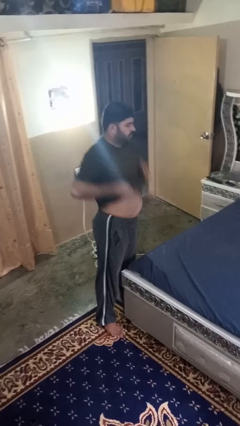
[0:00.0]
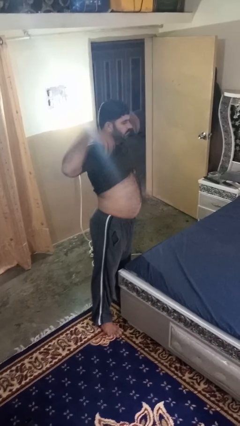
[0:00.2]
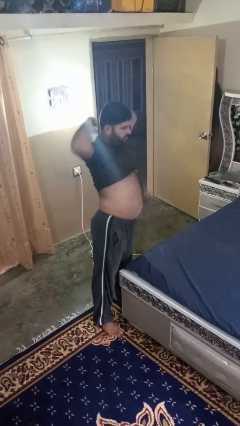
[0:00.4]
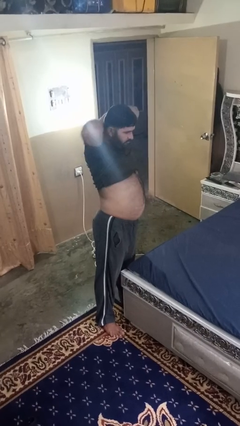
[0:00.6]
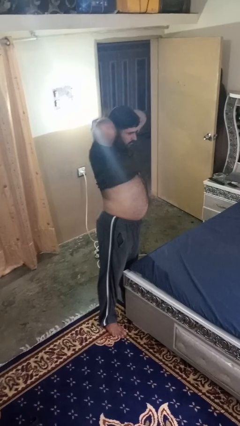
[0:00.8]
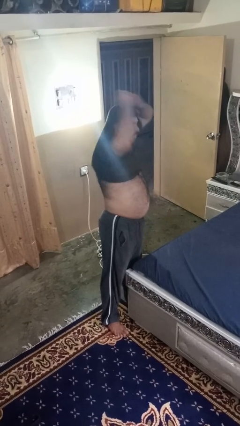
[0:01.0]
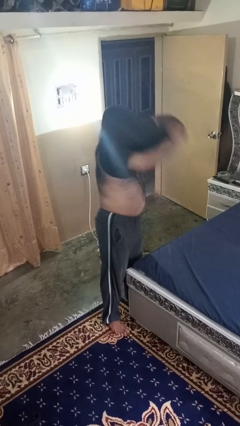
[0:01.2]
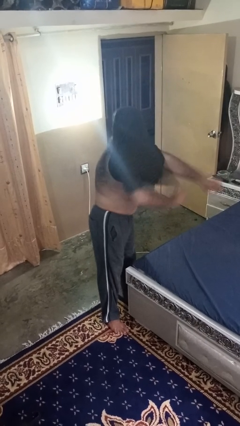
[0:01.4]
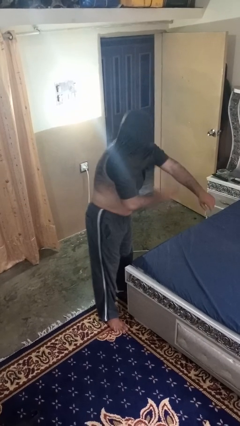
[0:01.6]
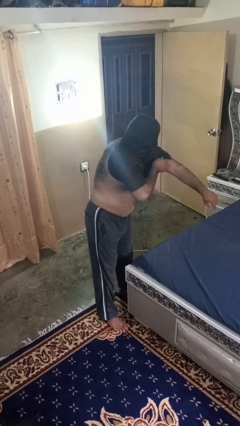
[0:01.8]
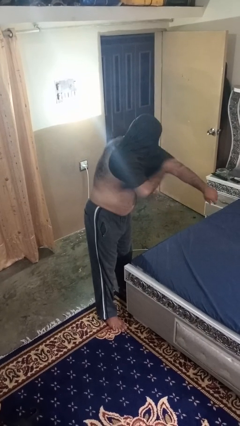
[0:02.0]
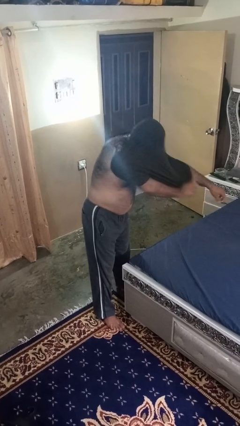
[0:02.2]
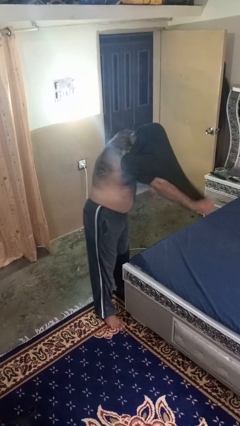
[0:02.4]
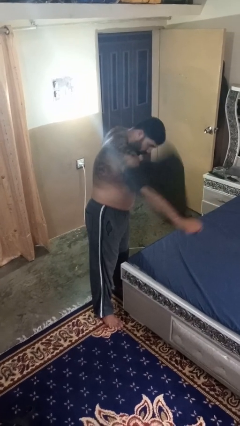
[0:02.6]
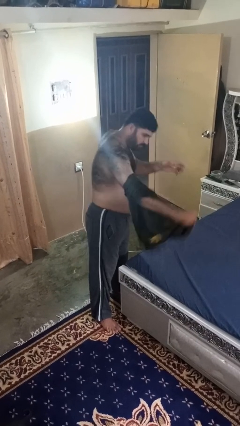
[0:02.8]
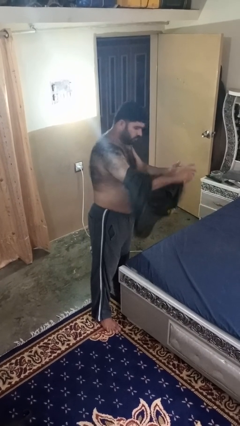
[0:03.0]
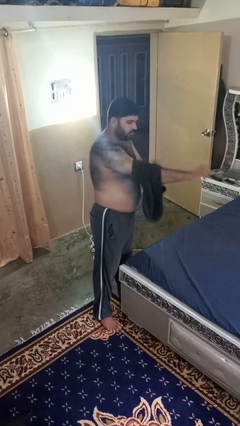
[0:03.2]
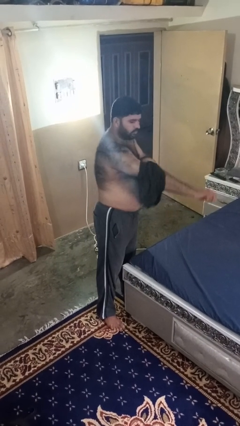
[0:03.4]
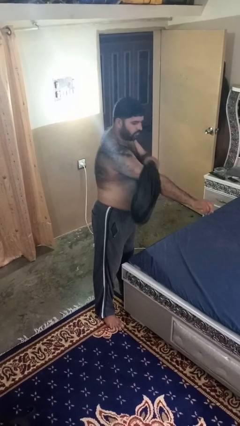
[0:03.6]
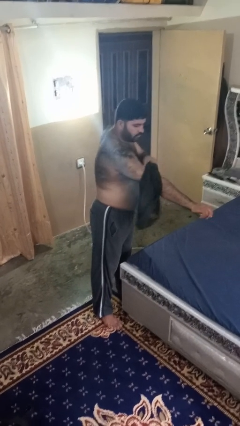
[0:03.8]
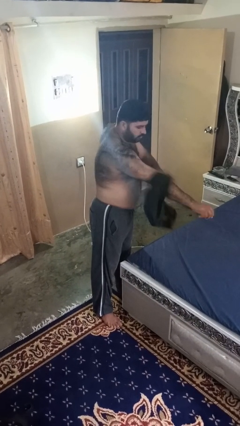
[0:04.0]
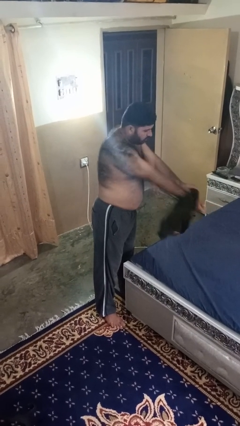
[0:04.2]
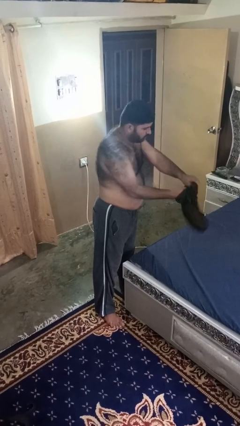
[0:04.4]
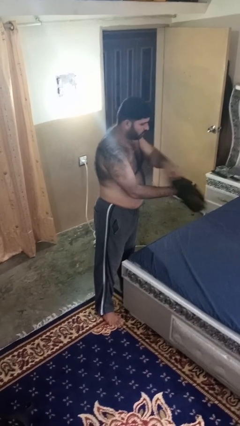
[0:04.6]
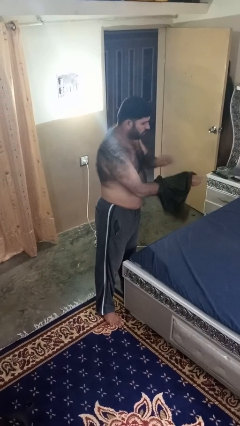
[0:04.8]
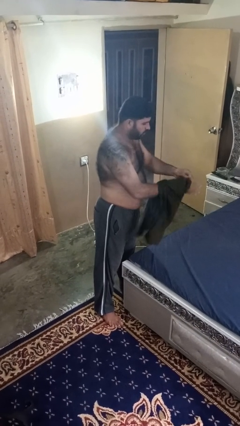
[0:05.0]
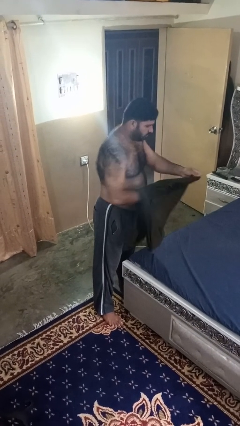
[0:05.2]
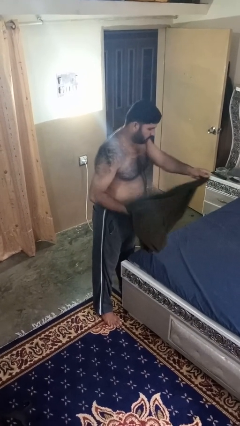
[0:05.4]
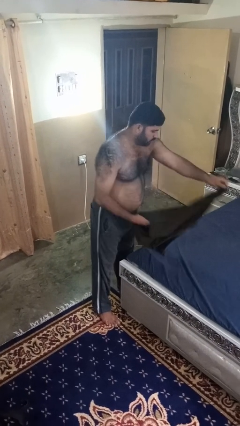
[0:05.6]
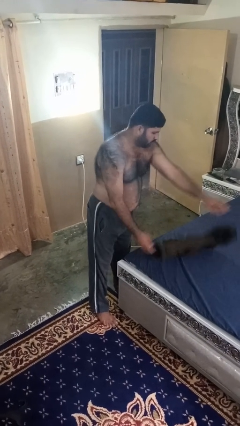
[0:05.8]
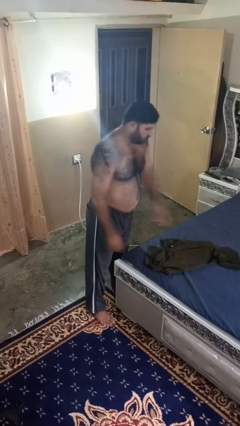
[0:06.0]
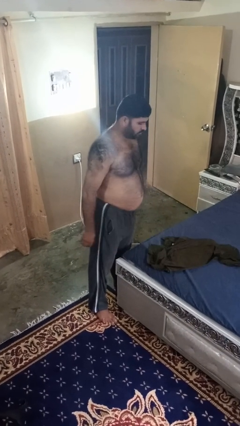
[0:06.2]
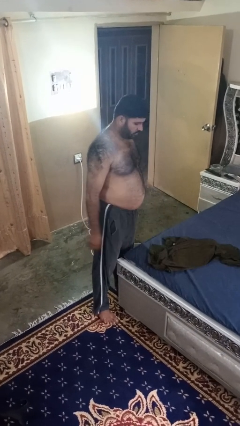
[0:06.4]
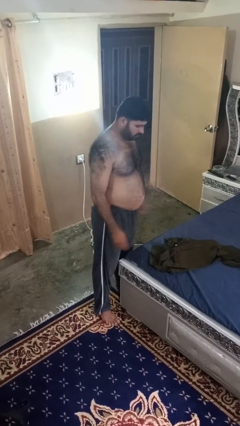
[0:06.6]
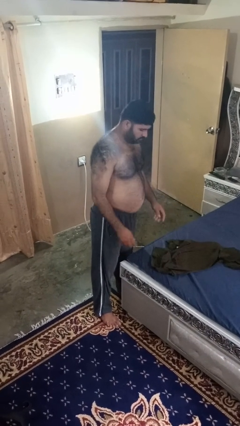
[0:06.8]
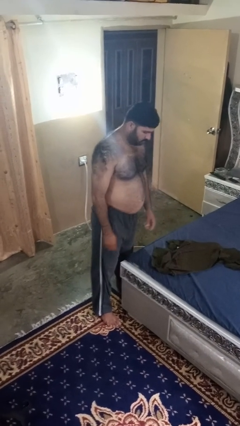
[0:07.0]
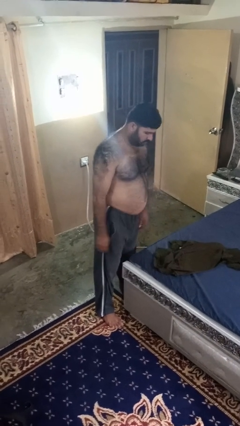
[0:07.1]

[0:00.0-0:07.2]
person takes off shirt

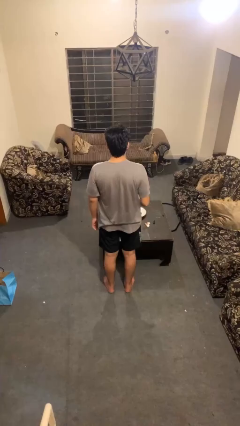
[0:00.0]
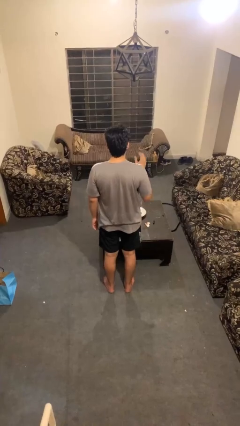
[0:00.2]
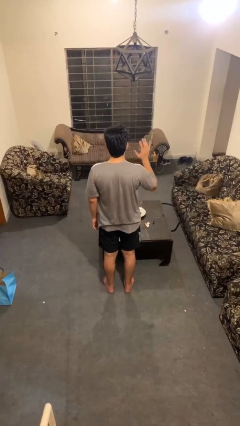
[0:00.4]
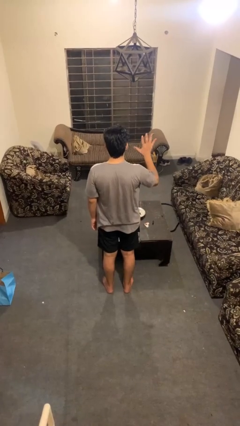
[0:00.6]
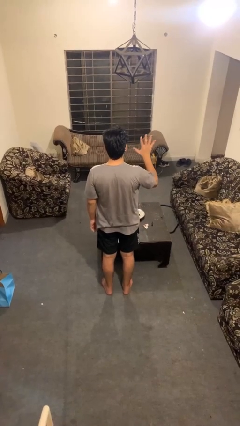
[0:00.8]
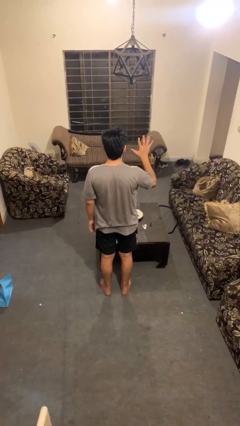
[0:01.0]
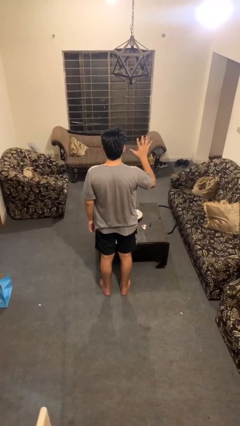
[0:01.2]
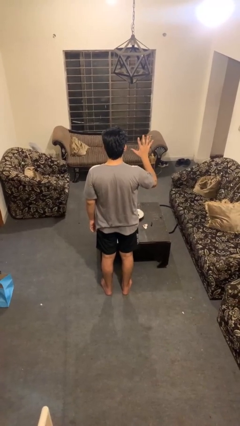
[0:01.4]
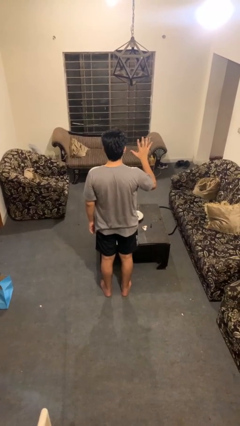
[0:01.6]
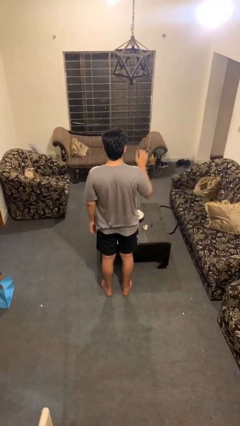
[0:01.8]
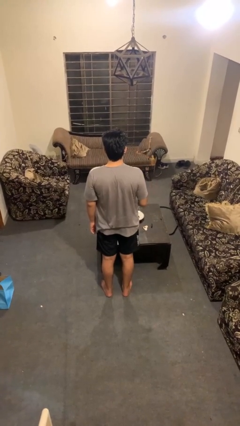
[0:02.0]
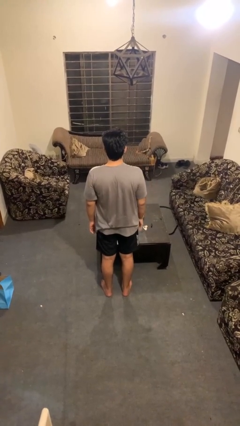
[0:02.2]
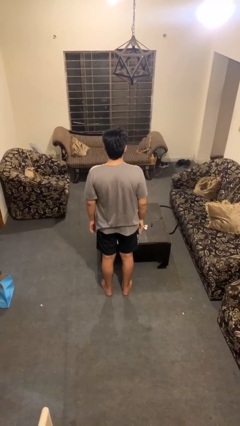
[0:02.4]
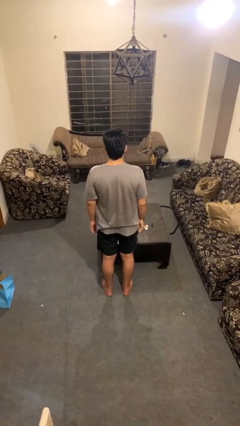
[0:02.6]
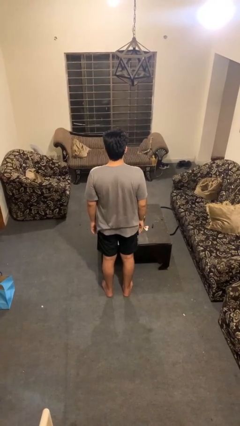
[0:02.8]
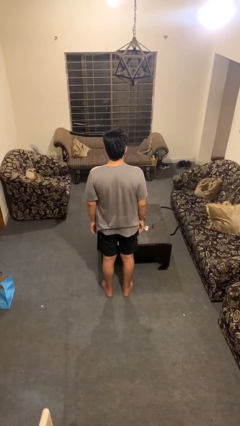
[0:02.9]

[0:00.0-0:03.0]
person gestures number five

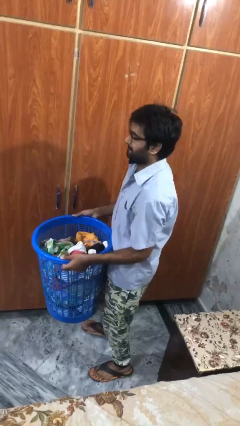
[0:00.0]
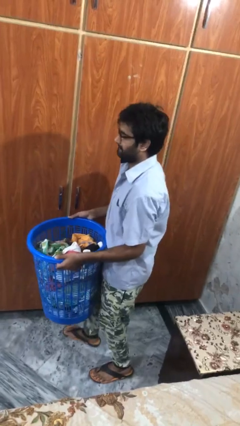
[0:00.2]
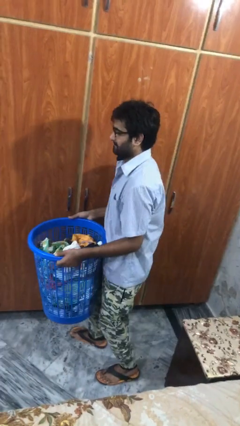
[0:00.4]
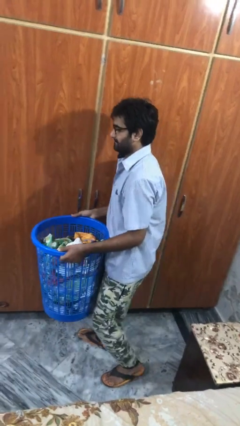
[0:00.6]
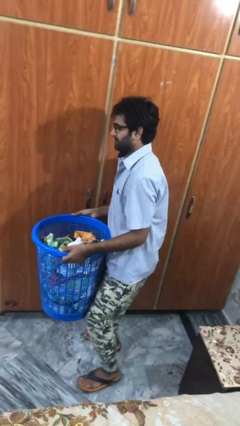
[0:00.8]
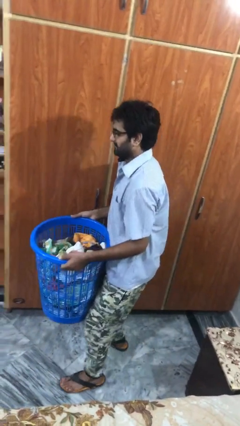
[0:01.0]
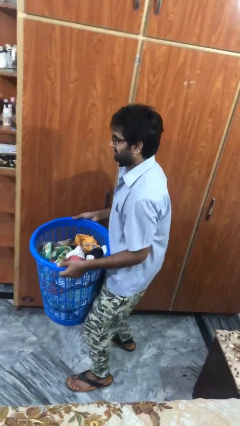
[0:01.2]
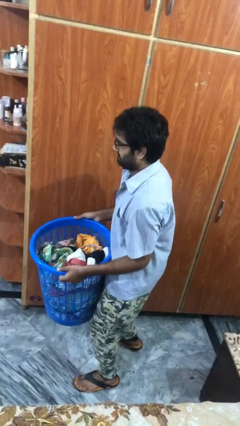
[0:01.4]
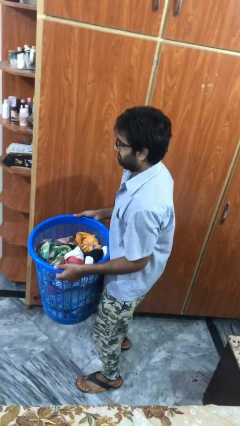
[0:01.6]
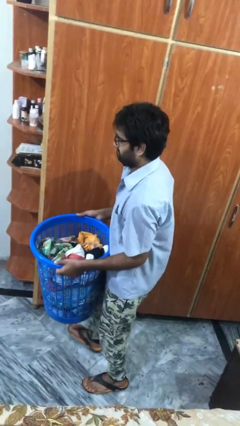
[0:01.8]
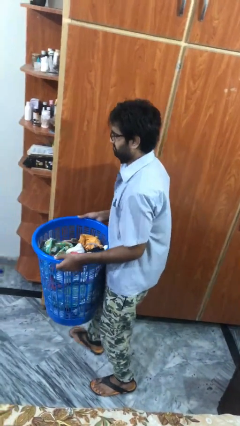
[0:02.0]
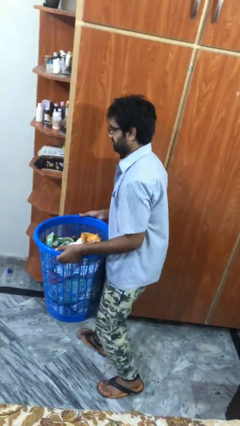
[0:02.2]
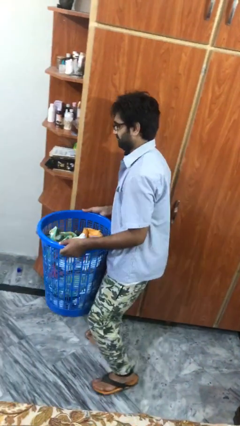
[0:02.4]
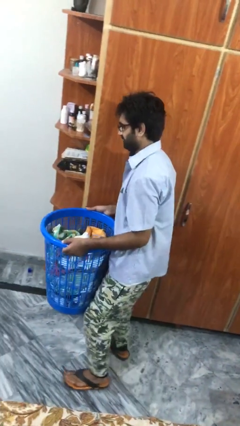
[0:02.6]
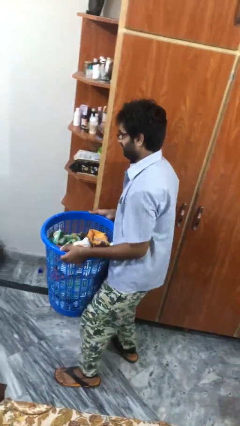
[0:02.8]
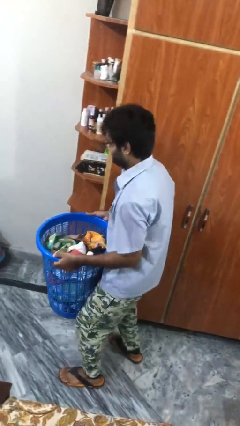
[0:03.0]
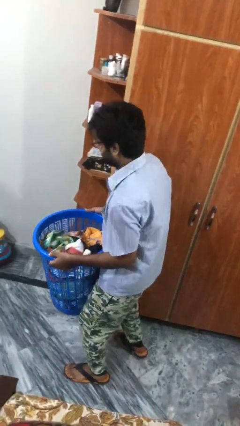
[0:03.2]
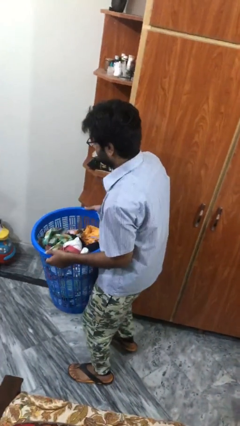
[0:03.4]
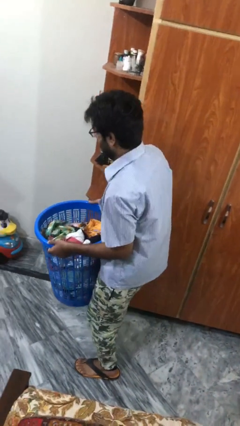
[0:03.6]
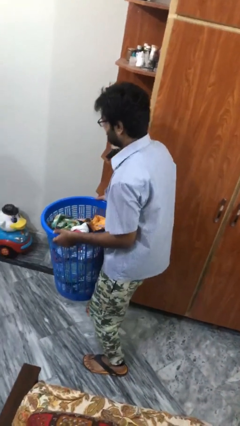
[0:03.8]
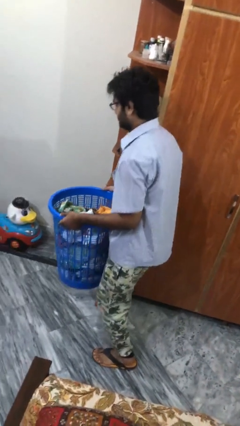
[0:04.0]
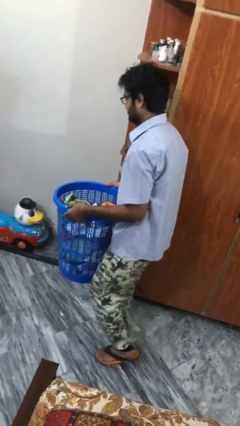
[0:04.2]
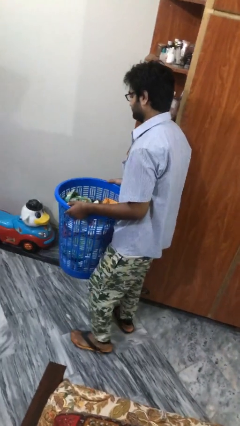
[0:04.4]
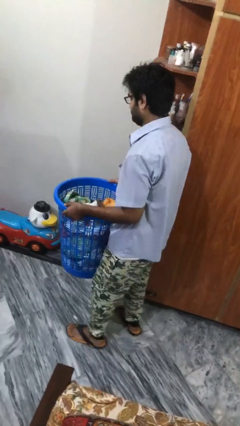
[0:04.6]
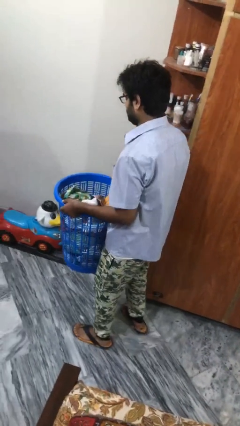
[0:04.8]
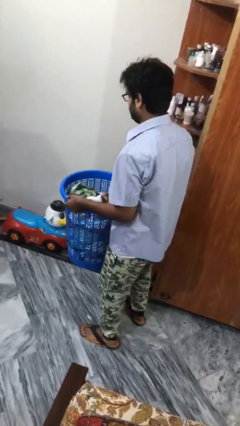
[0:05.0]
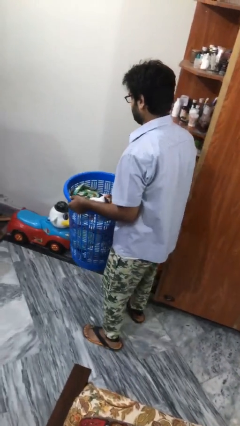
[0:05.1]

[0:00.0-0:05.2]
person carries heavy object

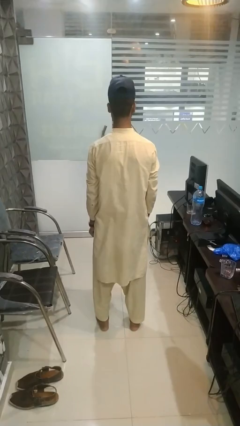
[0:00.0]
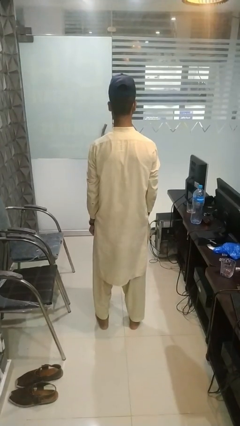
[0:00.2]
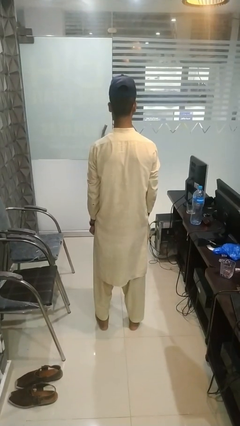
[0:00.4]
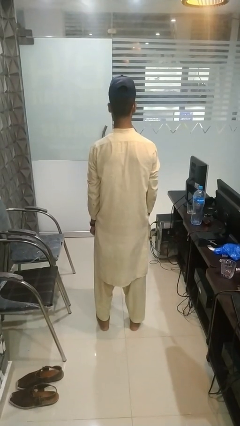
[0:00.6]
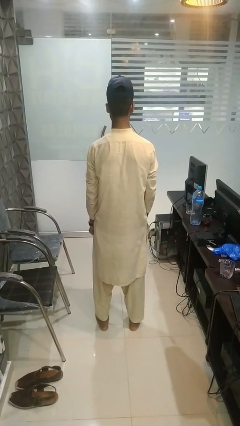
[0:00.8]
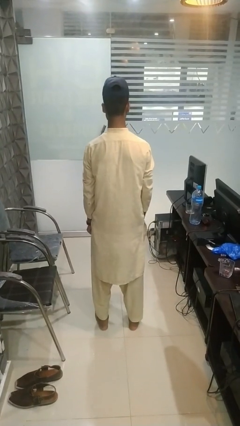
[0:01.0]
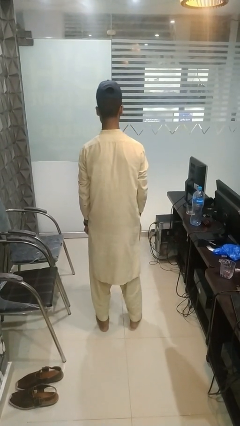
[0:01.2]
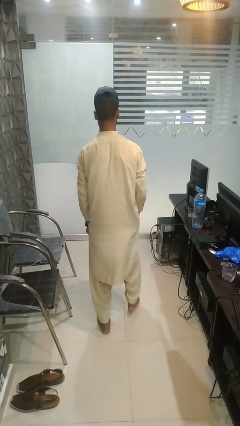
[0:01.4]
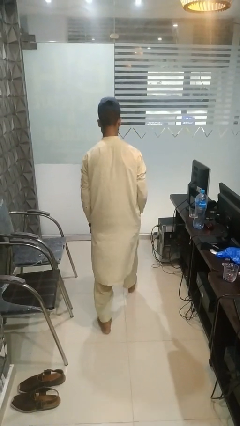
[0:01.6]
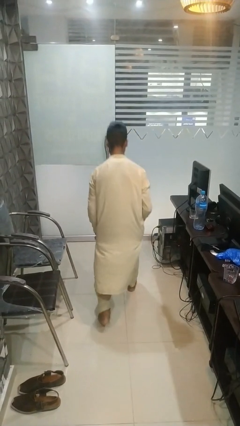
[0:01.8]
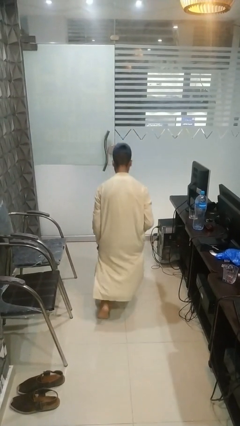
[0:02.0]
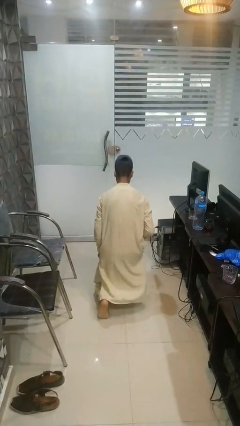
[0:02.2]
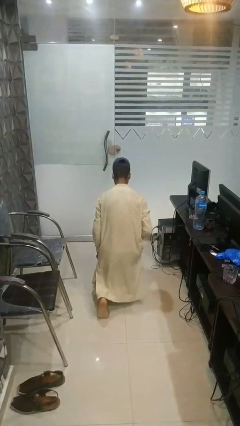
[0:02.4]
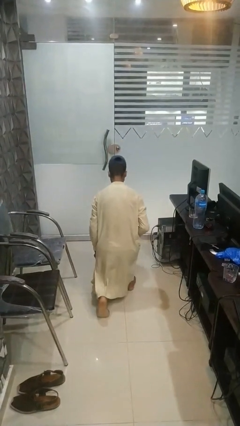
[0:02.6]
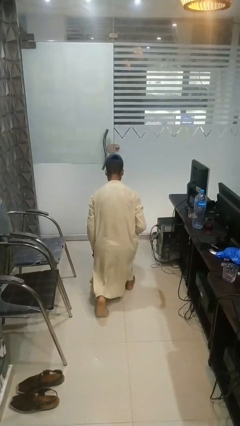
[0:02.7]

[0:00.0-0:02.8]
person kneels
